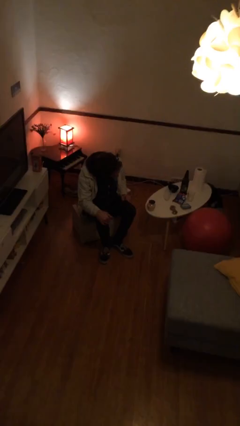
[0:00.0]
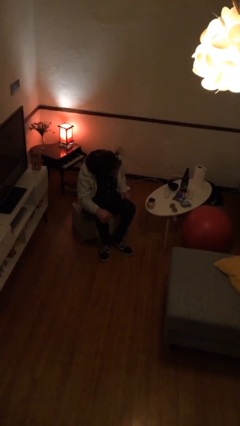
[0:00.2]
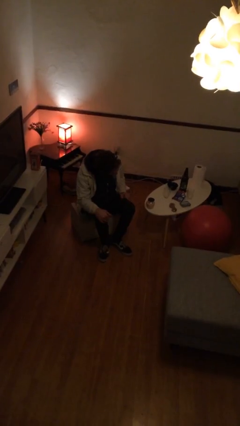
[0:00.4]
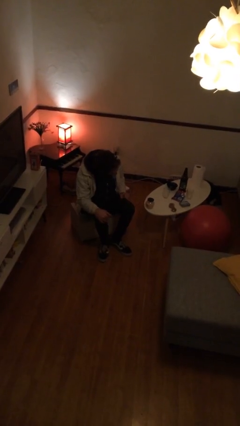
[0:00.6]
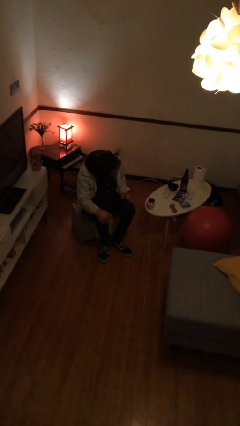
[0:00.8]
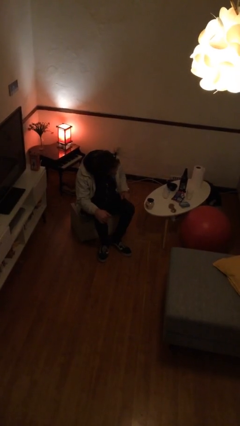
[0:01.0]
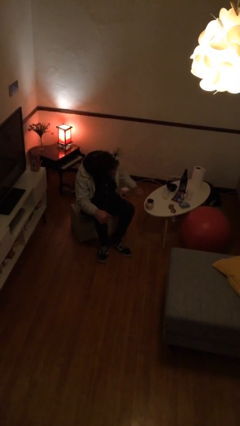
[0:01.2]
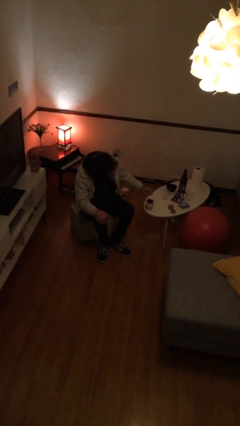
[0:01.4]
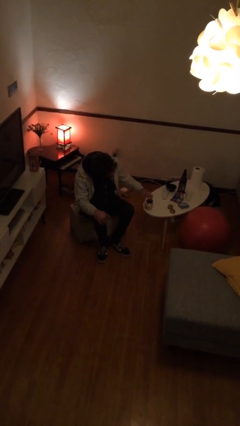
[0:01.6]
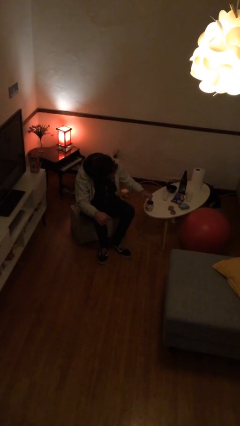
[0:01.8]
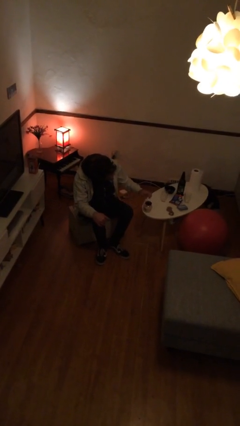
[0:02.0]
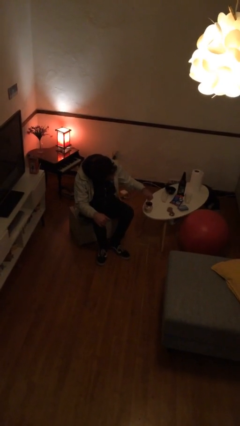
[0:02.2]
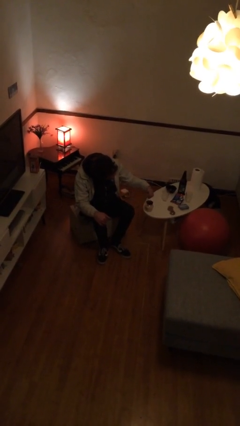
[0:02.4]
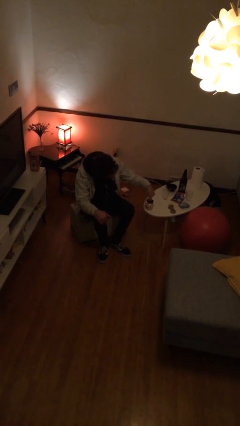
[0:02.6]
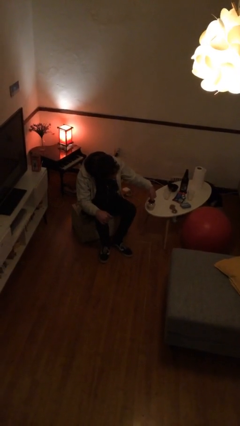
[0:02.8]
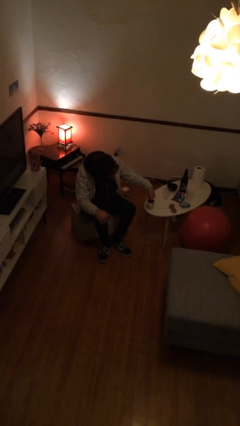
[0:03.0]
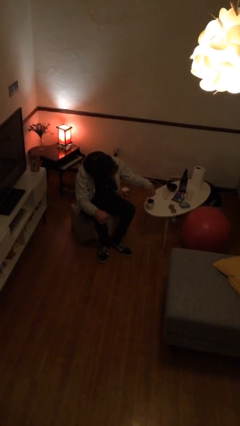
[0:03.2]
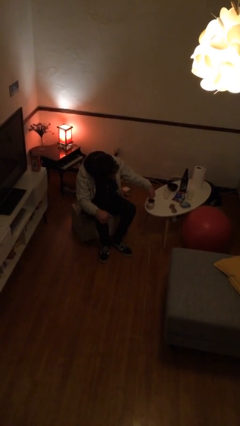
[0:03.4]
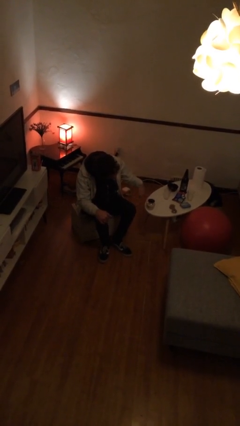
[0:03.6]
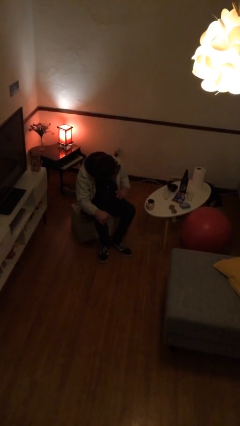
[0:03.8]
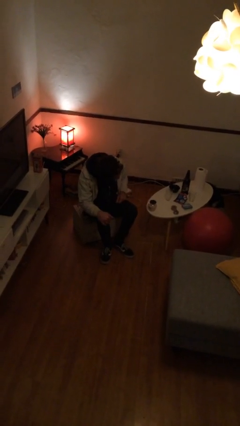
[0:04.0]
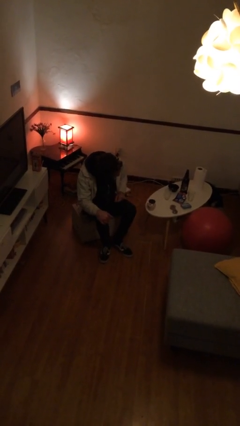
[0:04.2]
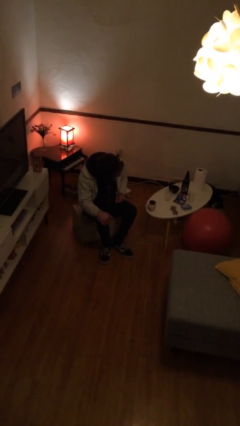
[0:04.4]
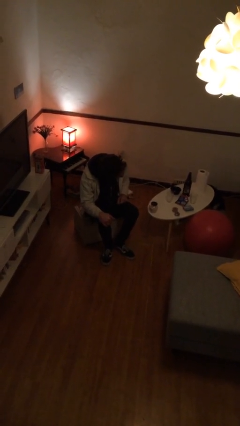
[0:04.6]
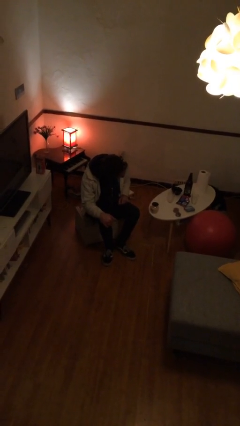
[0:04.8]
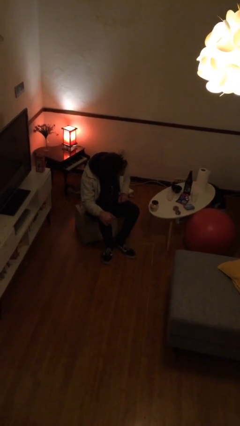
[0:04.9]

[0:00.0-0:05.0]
person taps object with finger

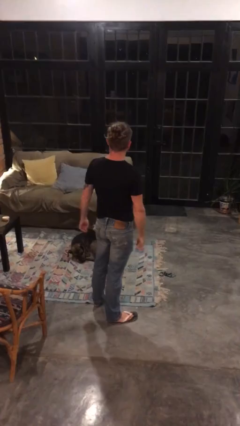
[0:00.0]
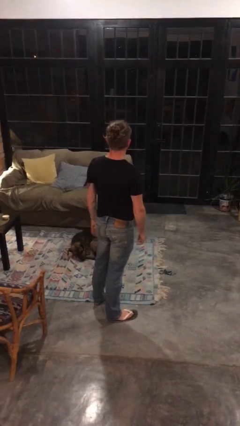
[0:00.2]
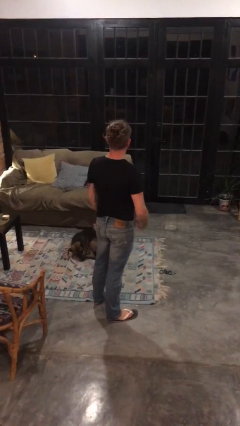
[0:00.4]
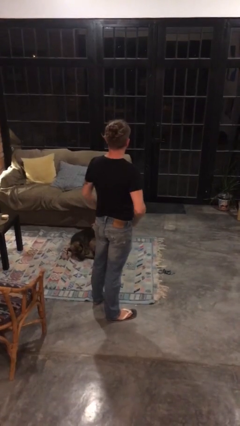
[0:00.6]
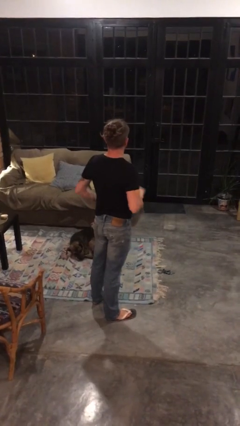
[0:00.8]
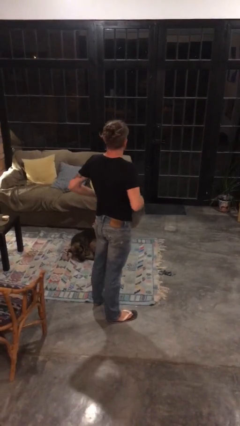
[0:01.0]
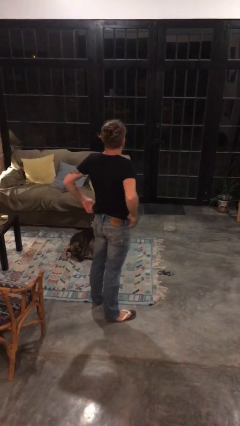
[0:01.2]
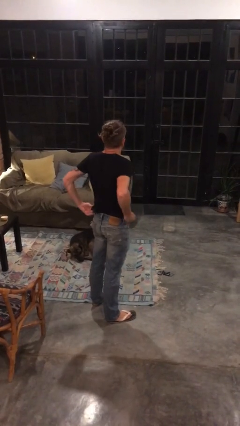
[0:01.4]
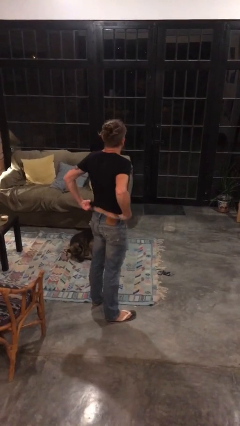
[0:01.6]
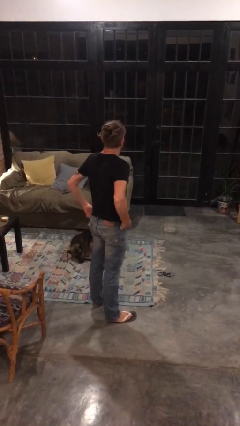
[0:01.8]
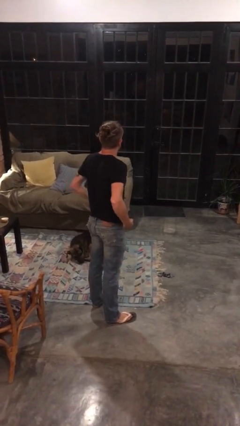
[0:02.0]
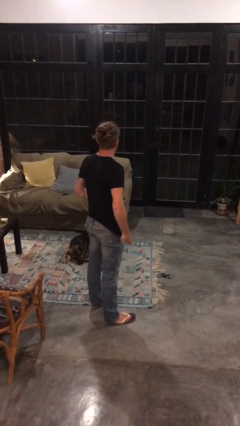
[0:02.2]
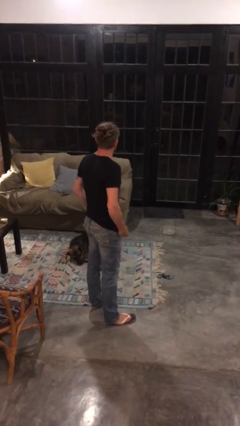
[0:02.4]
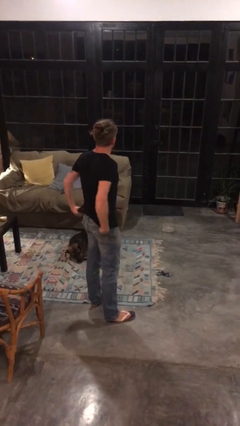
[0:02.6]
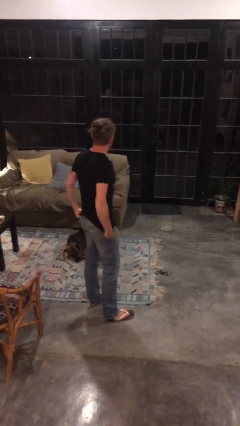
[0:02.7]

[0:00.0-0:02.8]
person untucks shirt

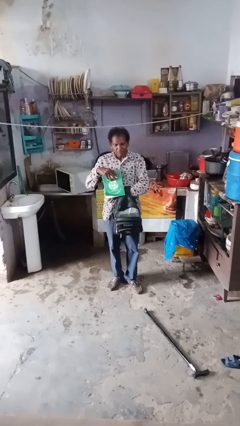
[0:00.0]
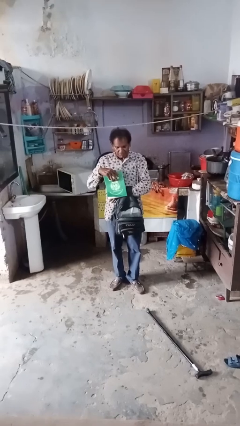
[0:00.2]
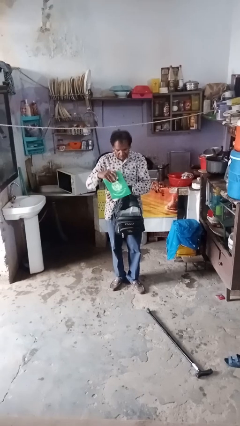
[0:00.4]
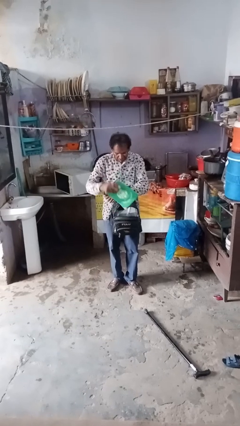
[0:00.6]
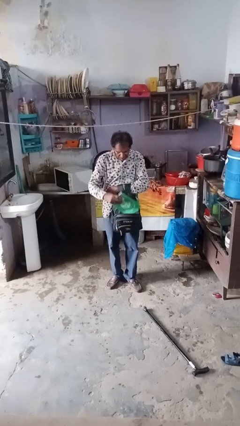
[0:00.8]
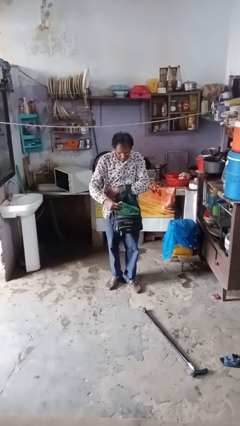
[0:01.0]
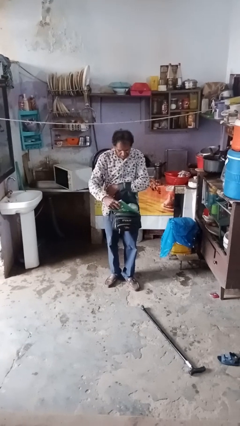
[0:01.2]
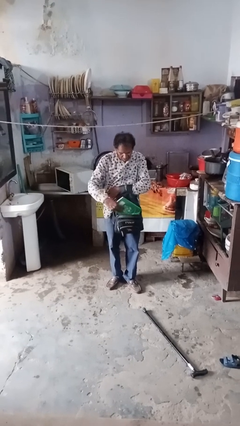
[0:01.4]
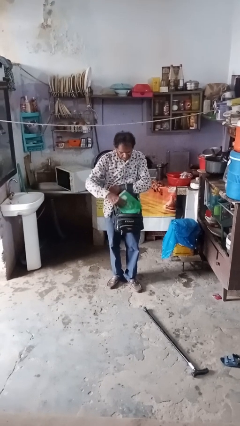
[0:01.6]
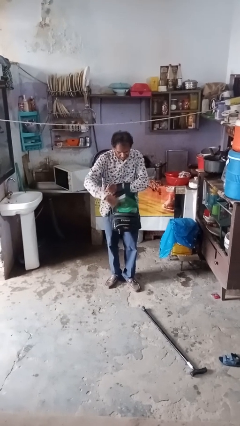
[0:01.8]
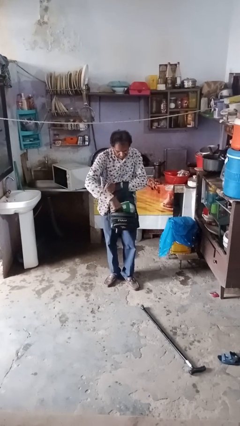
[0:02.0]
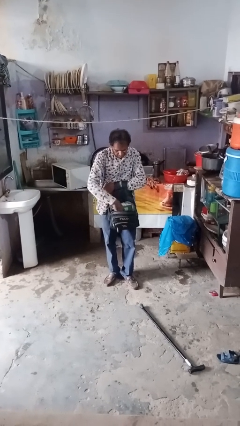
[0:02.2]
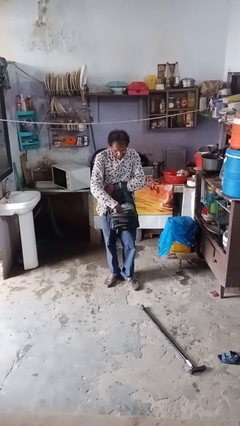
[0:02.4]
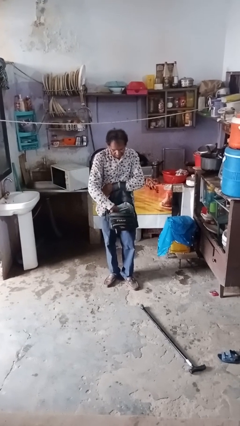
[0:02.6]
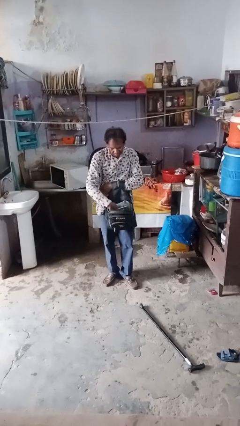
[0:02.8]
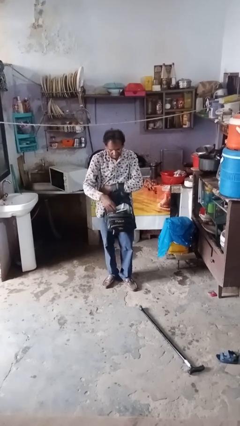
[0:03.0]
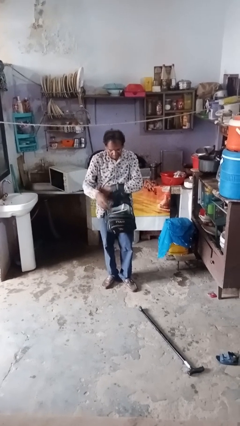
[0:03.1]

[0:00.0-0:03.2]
person puts object into bag

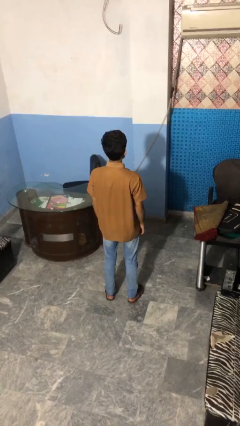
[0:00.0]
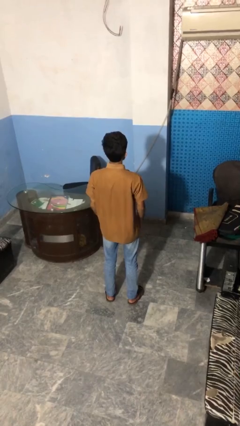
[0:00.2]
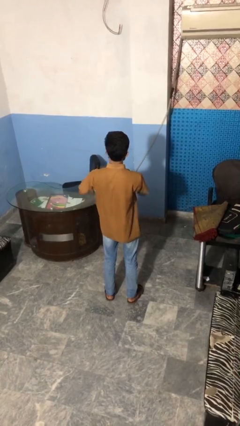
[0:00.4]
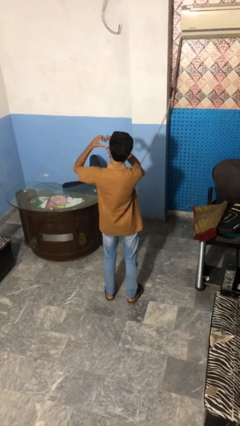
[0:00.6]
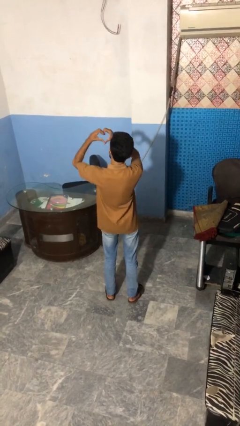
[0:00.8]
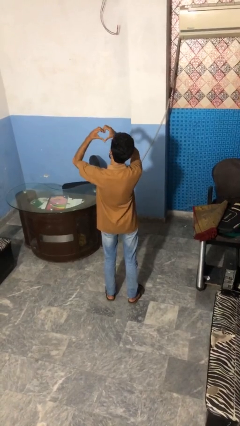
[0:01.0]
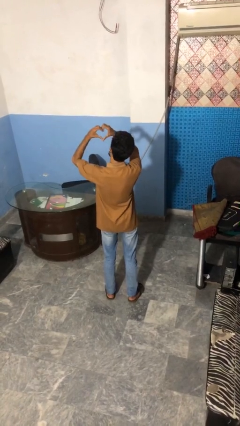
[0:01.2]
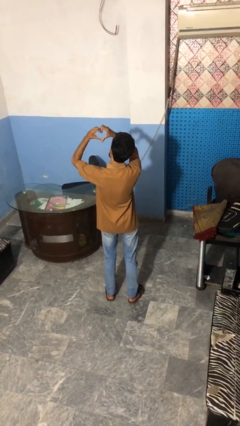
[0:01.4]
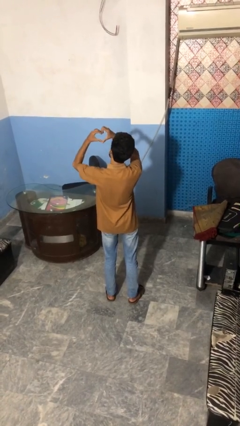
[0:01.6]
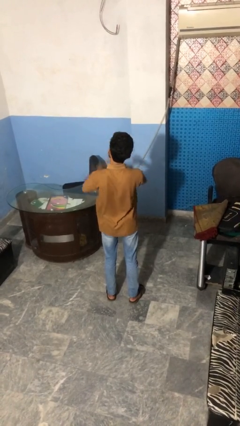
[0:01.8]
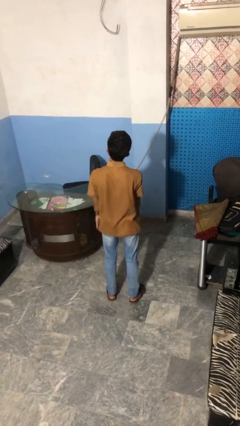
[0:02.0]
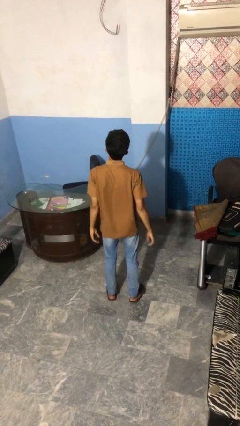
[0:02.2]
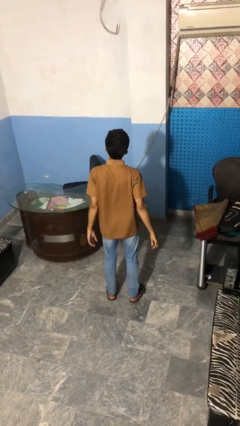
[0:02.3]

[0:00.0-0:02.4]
person gestures heart

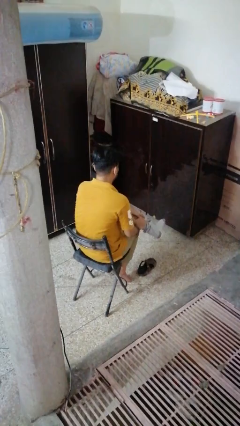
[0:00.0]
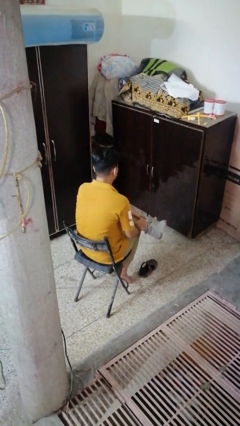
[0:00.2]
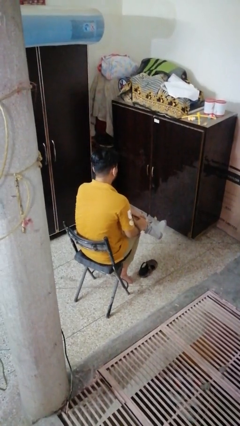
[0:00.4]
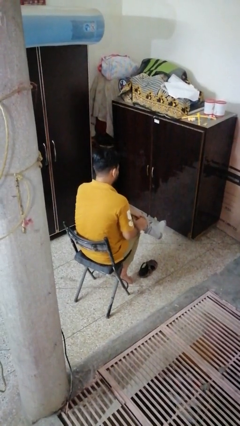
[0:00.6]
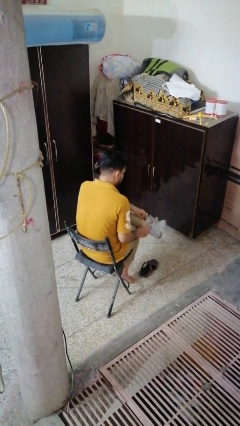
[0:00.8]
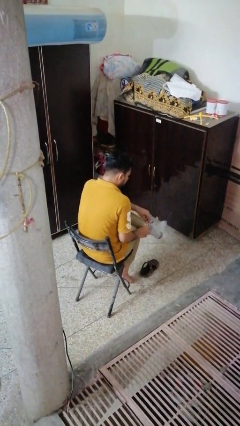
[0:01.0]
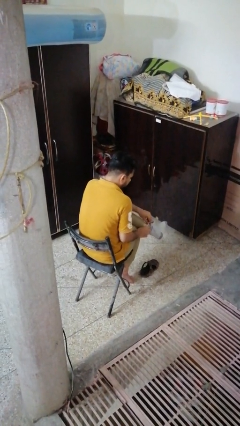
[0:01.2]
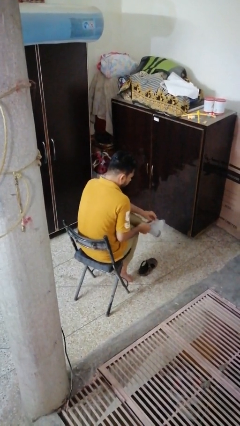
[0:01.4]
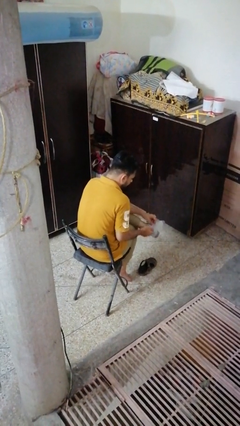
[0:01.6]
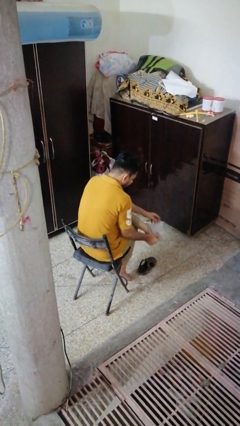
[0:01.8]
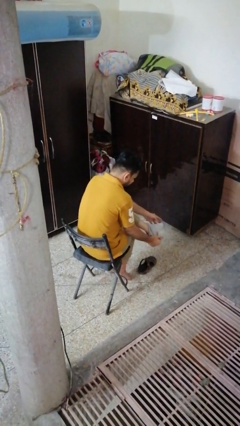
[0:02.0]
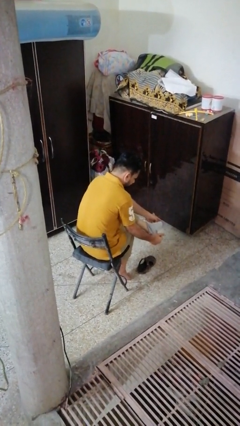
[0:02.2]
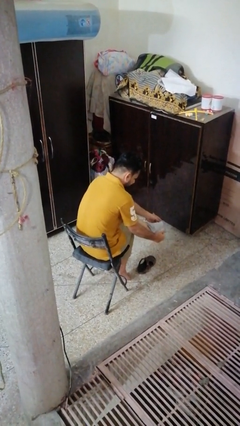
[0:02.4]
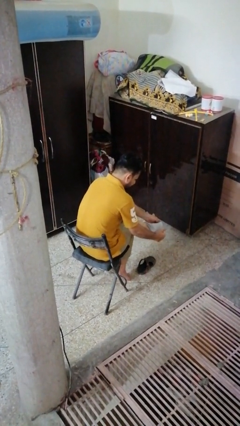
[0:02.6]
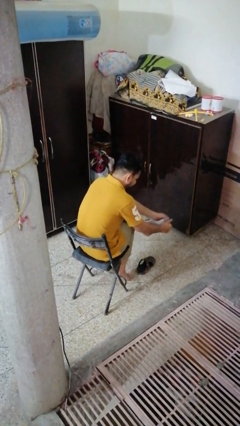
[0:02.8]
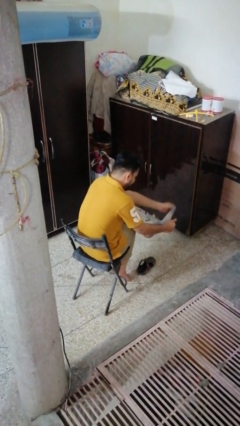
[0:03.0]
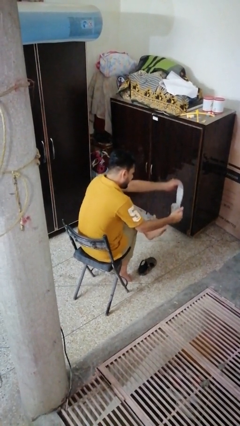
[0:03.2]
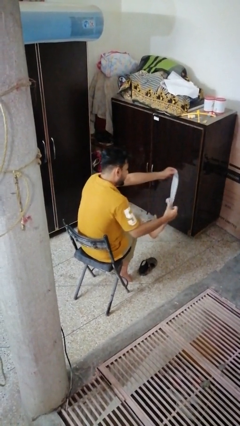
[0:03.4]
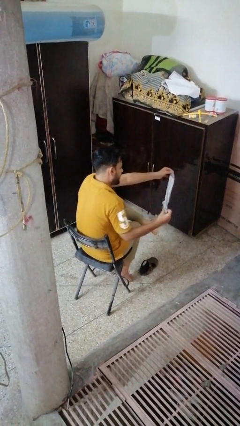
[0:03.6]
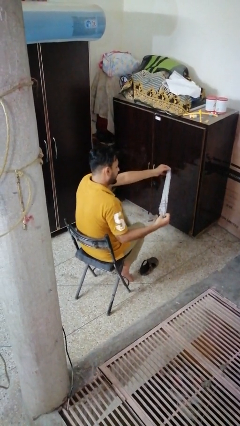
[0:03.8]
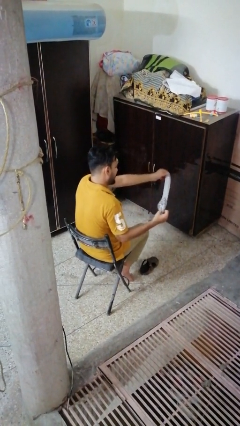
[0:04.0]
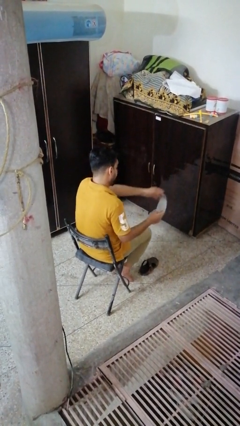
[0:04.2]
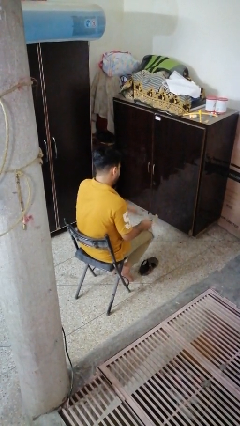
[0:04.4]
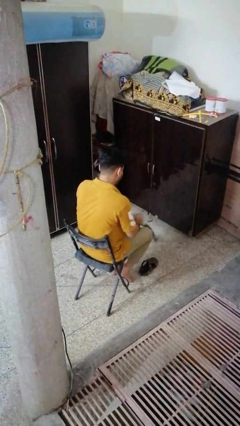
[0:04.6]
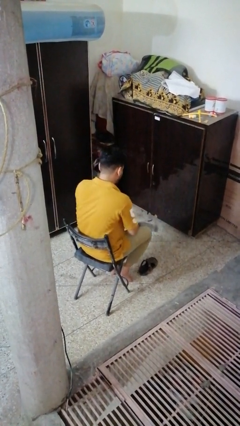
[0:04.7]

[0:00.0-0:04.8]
person takes off socks
